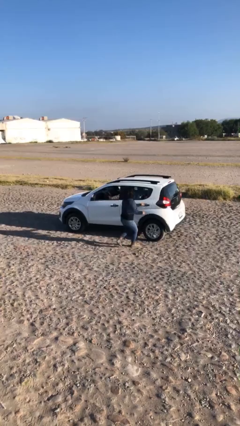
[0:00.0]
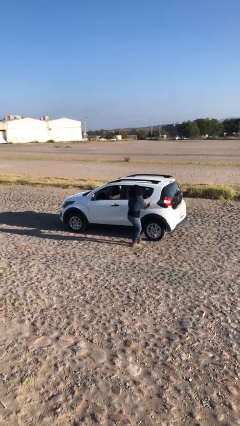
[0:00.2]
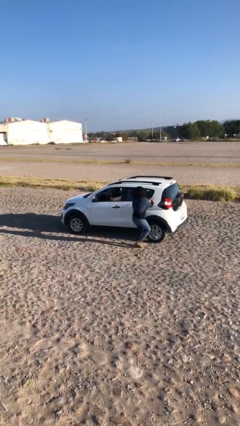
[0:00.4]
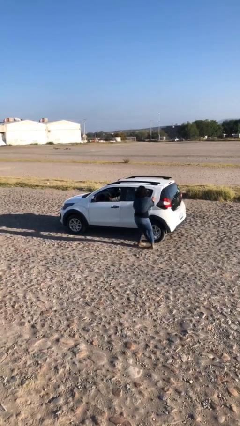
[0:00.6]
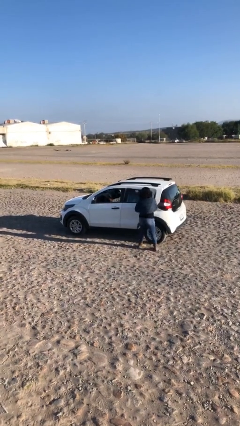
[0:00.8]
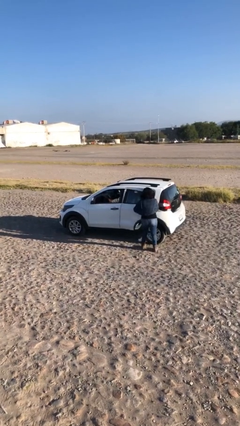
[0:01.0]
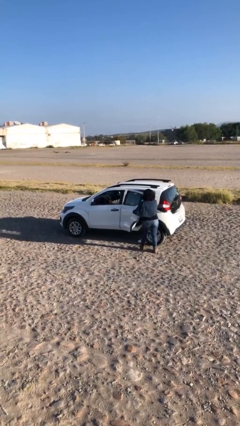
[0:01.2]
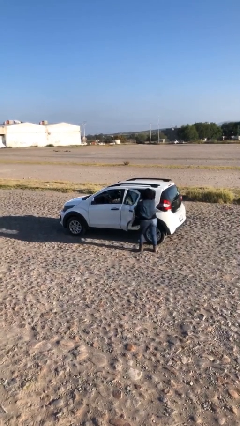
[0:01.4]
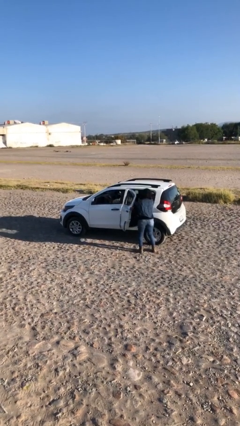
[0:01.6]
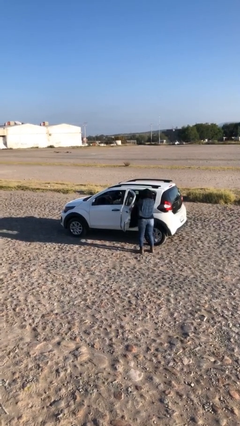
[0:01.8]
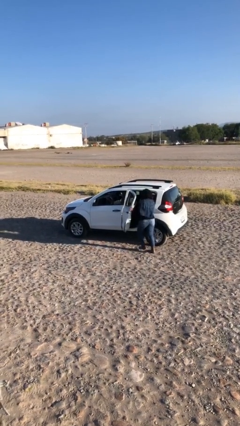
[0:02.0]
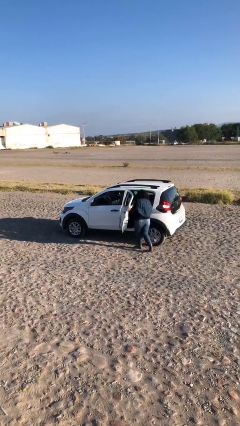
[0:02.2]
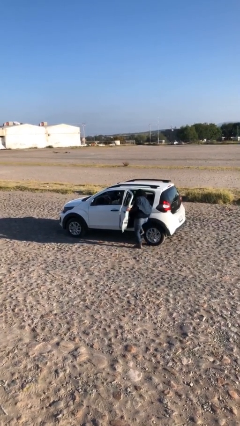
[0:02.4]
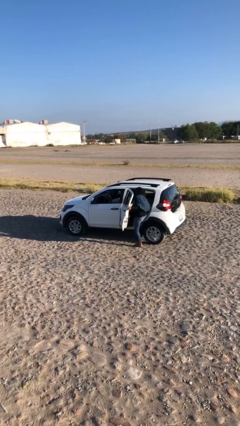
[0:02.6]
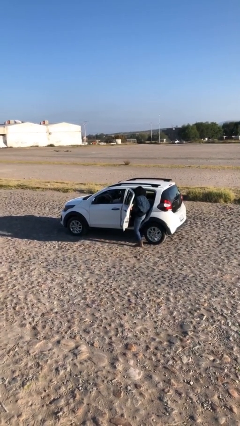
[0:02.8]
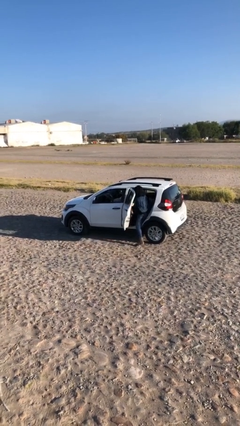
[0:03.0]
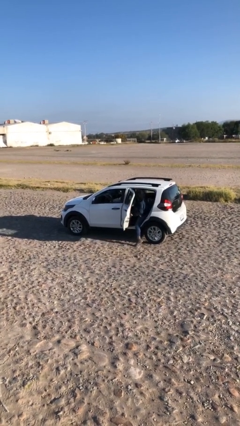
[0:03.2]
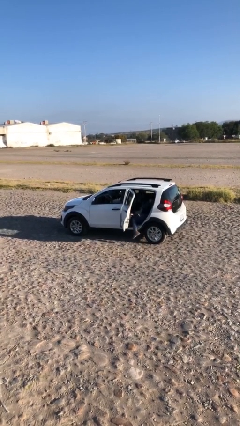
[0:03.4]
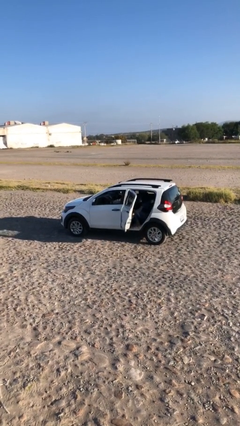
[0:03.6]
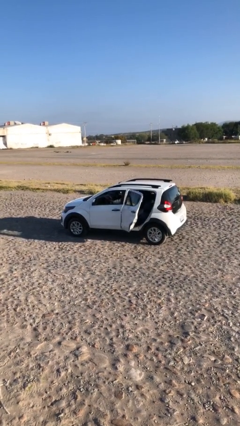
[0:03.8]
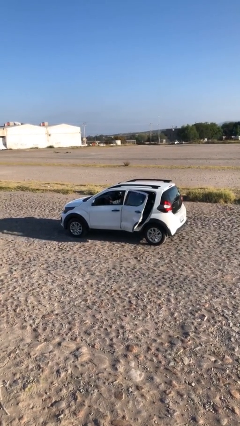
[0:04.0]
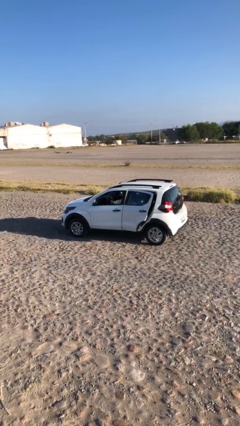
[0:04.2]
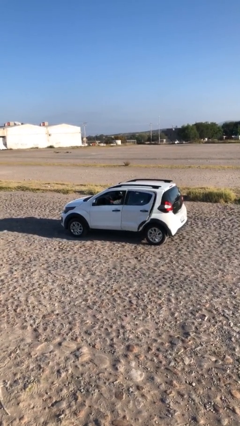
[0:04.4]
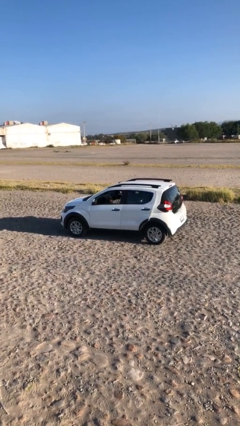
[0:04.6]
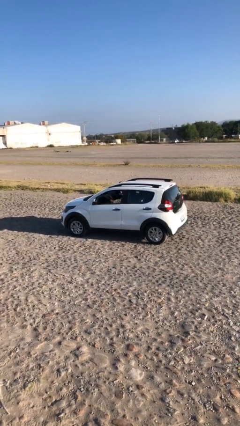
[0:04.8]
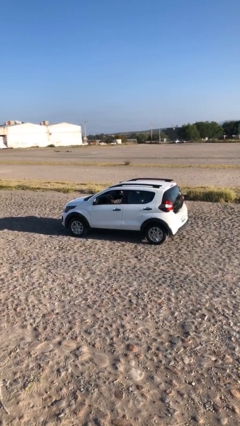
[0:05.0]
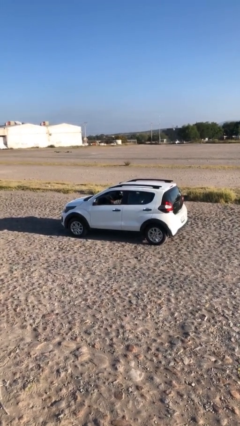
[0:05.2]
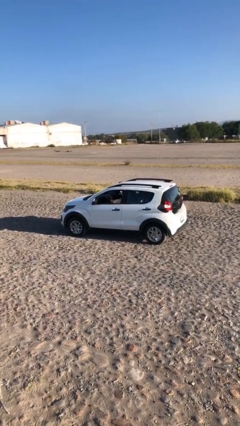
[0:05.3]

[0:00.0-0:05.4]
car picks up person

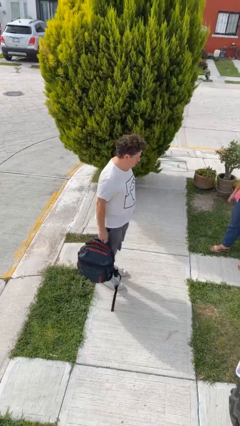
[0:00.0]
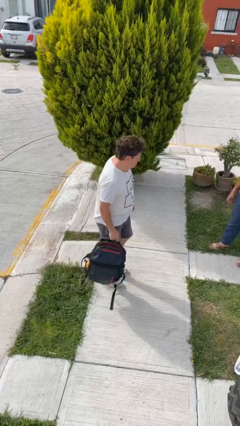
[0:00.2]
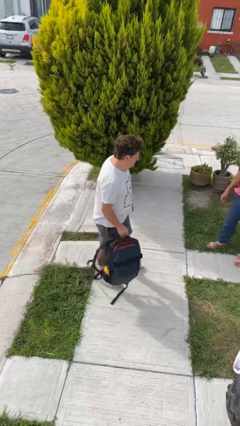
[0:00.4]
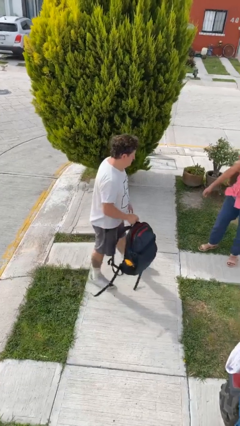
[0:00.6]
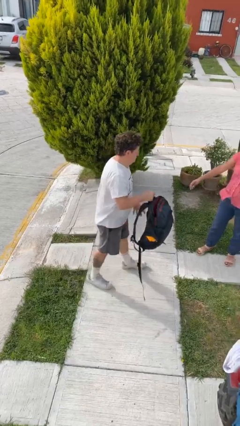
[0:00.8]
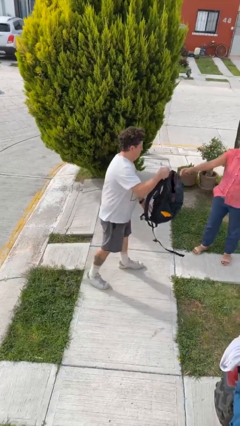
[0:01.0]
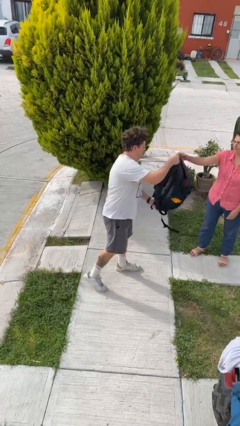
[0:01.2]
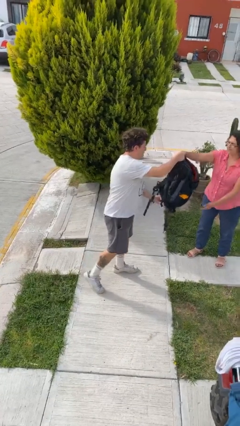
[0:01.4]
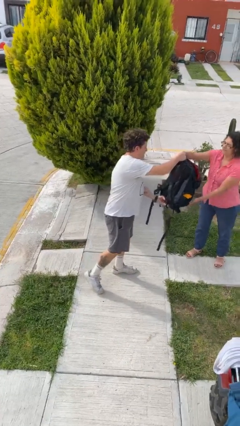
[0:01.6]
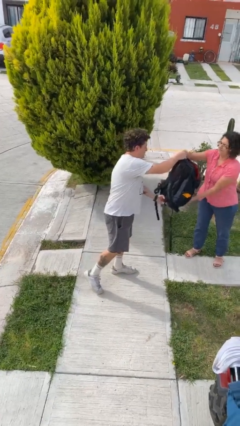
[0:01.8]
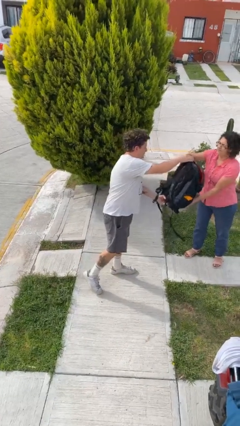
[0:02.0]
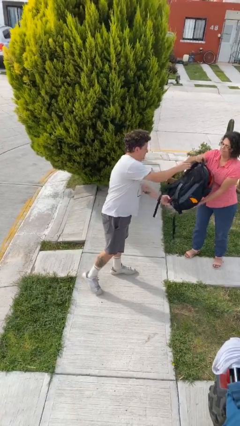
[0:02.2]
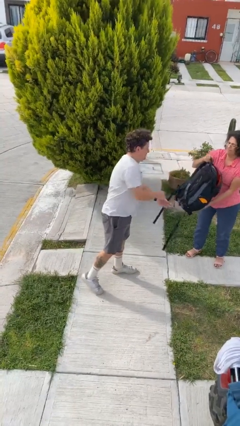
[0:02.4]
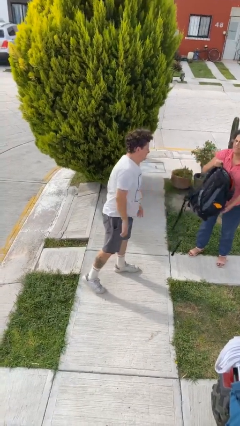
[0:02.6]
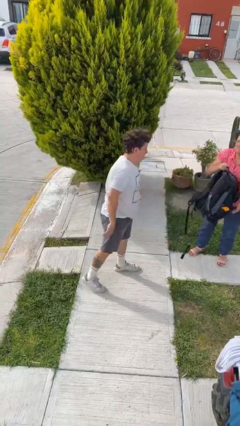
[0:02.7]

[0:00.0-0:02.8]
person transfers object to person

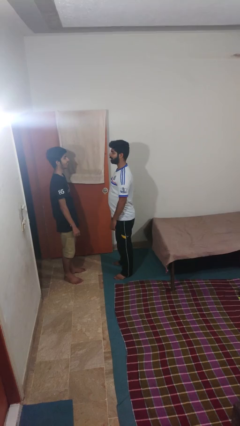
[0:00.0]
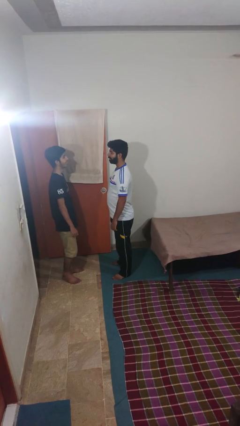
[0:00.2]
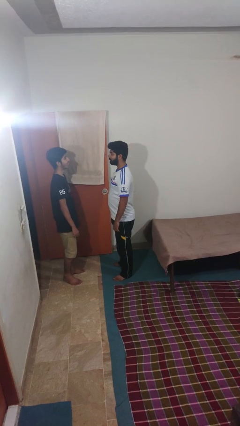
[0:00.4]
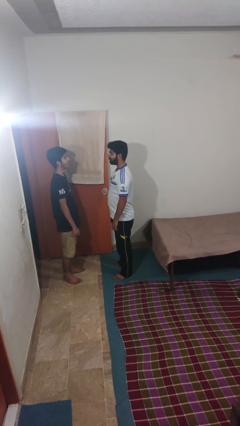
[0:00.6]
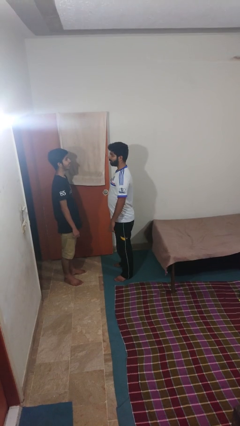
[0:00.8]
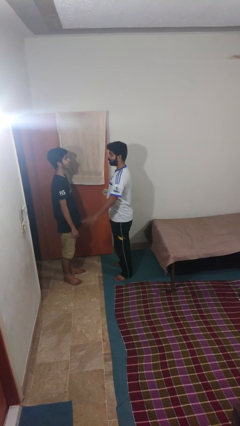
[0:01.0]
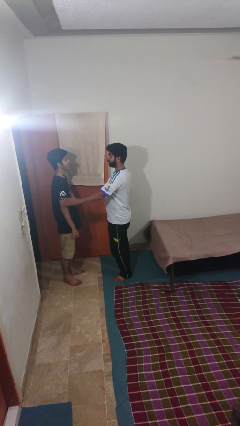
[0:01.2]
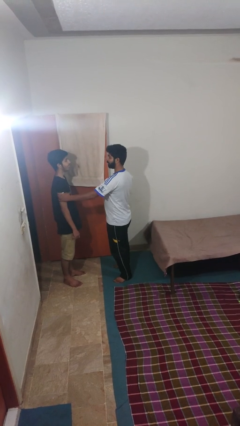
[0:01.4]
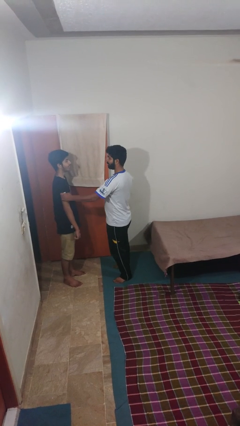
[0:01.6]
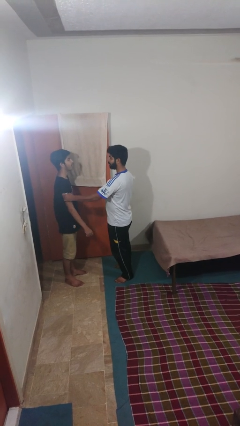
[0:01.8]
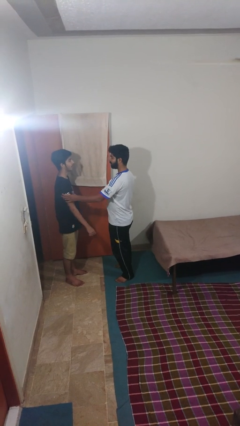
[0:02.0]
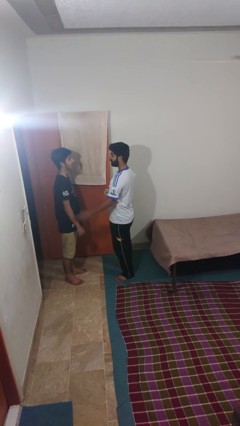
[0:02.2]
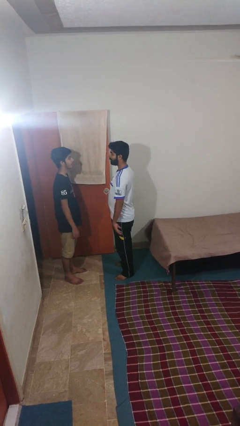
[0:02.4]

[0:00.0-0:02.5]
person grabs person by bicep

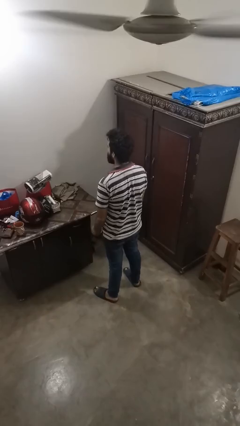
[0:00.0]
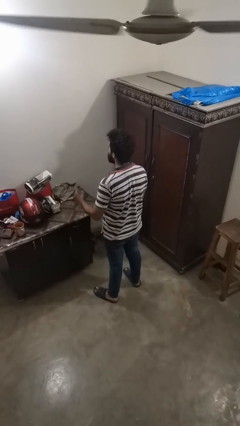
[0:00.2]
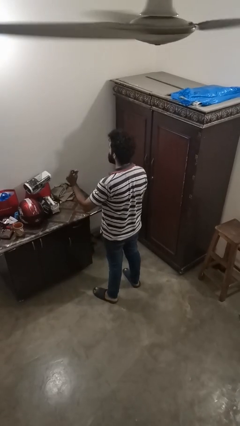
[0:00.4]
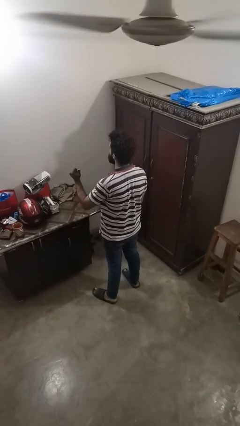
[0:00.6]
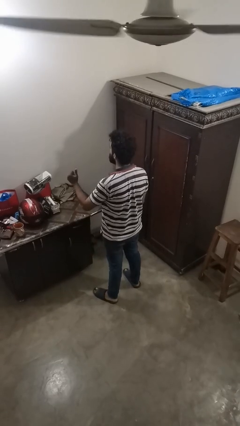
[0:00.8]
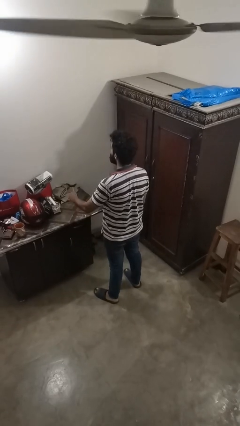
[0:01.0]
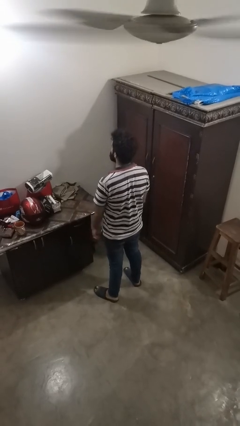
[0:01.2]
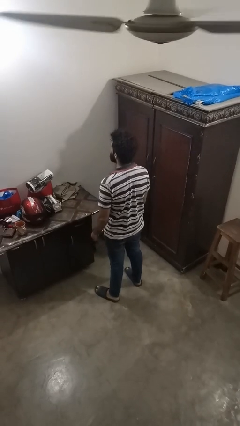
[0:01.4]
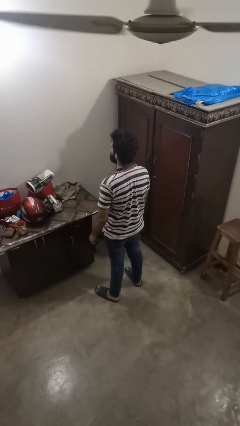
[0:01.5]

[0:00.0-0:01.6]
person snaps fingers

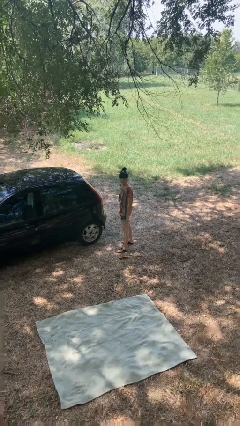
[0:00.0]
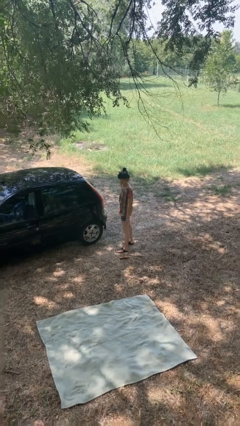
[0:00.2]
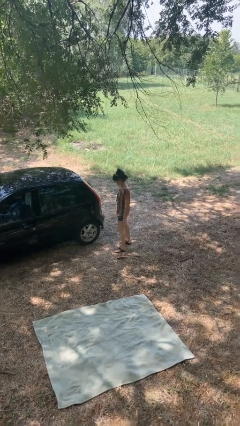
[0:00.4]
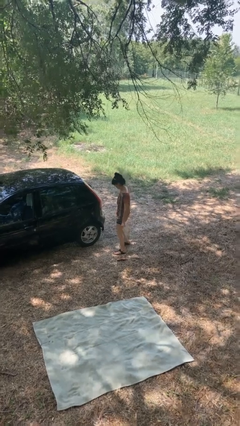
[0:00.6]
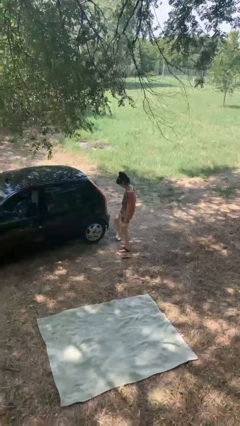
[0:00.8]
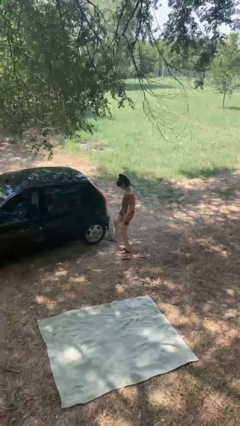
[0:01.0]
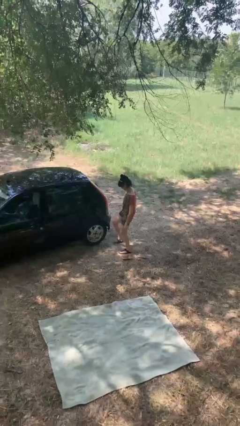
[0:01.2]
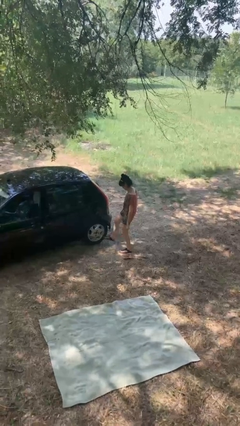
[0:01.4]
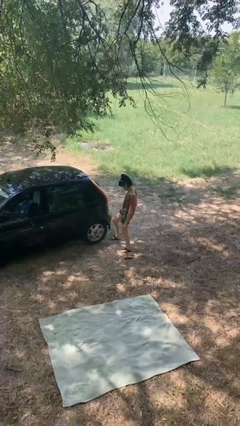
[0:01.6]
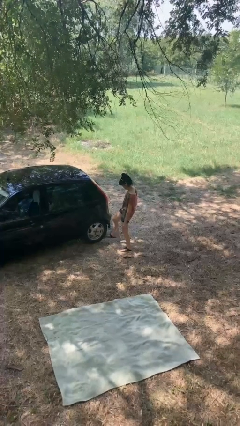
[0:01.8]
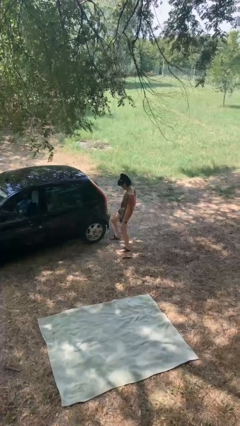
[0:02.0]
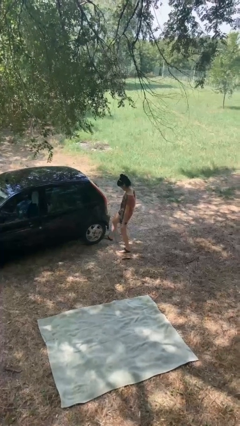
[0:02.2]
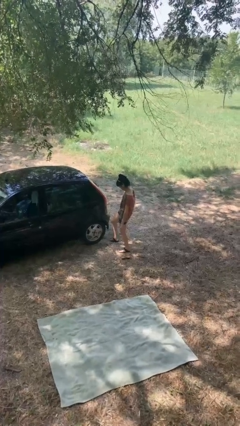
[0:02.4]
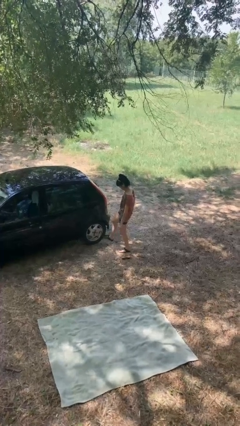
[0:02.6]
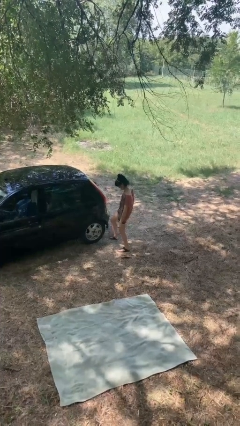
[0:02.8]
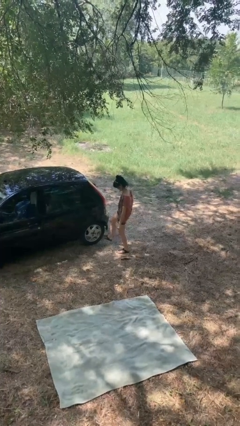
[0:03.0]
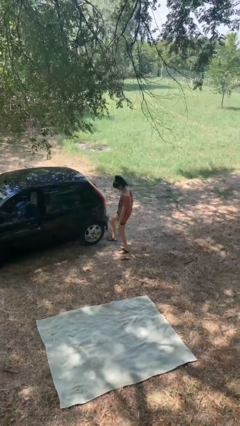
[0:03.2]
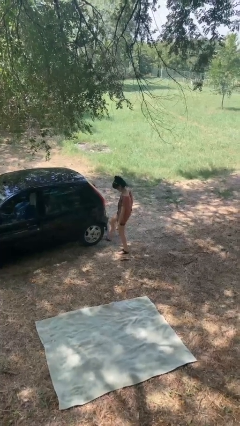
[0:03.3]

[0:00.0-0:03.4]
person kicks car tires

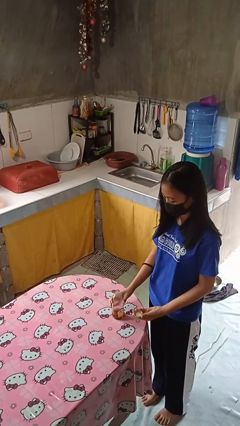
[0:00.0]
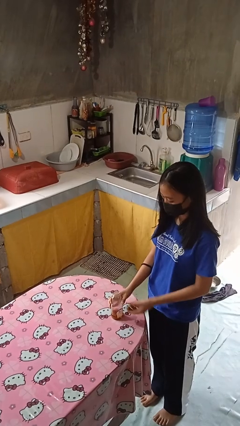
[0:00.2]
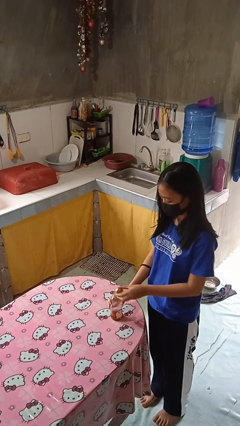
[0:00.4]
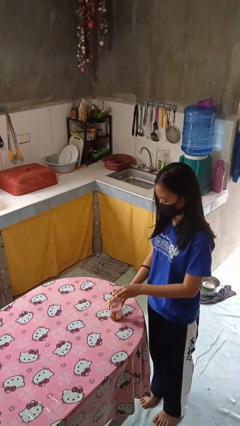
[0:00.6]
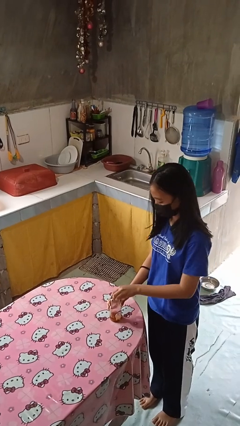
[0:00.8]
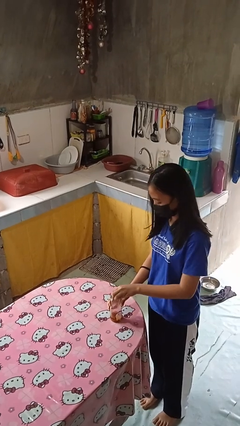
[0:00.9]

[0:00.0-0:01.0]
person closes jar

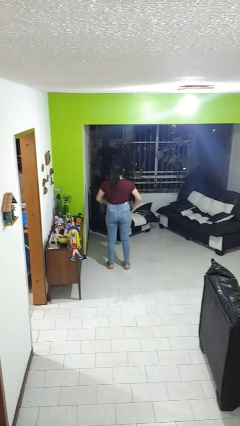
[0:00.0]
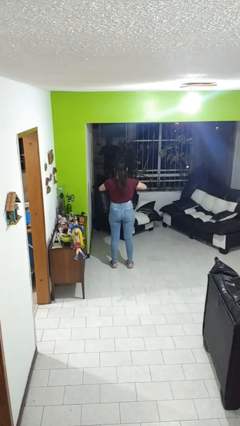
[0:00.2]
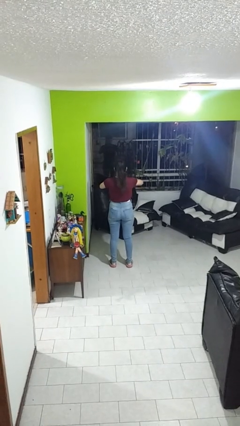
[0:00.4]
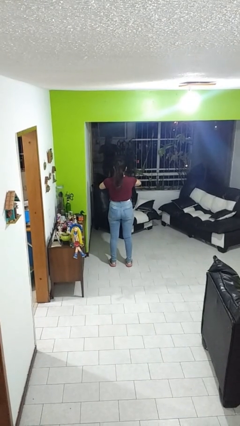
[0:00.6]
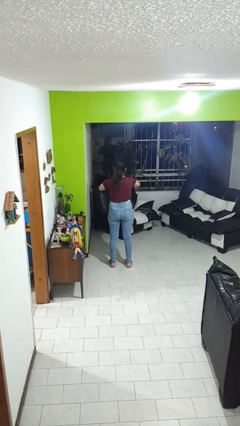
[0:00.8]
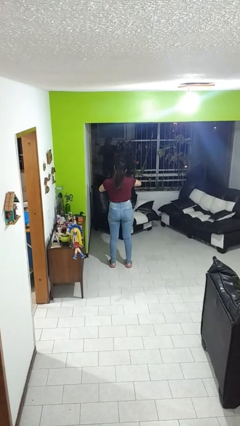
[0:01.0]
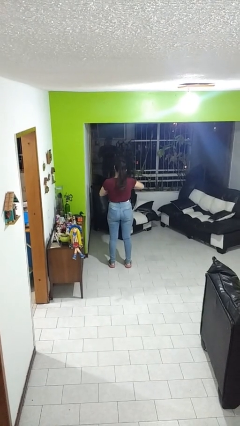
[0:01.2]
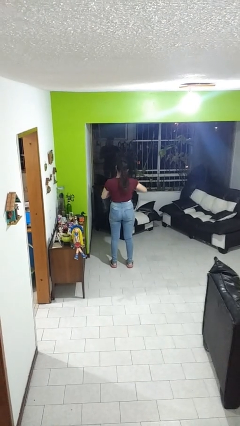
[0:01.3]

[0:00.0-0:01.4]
person cracks knuckles
